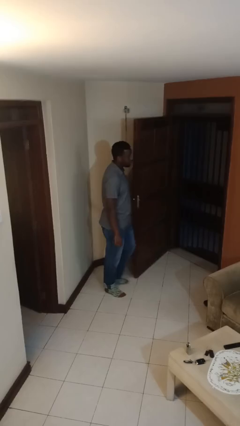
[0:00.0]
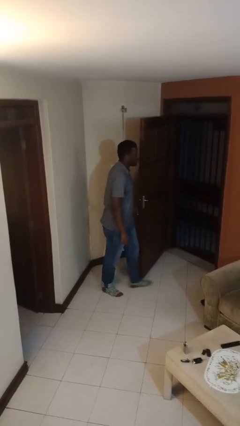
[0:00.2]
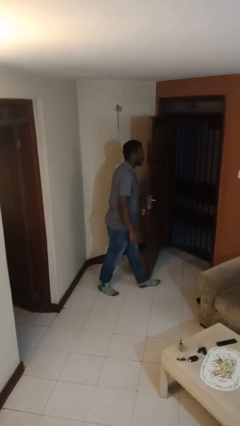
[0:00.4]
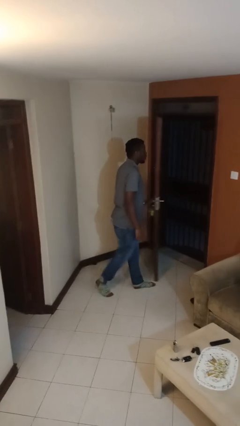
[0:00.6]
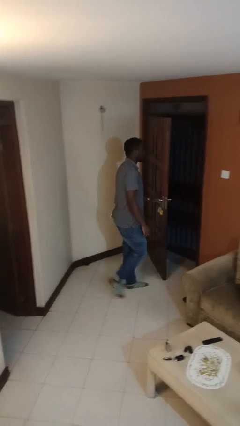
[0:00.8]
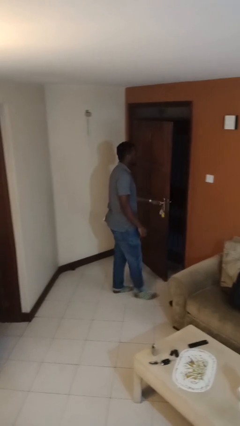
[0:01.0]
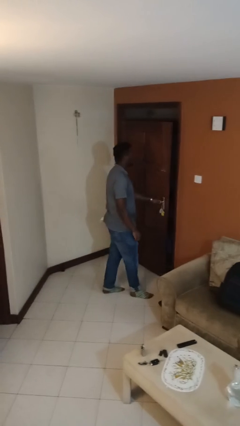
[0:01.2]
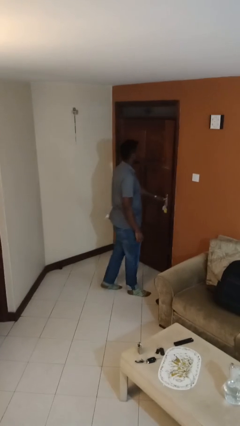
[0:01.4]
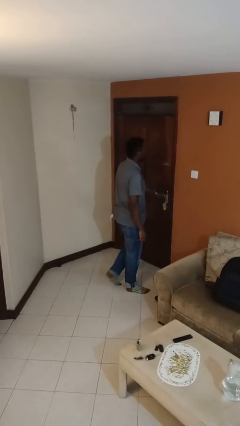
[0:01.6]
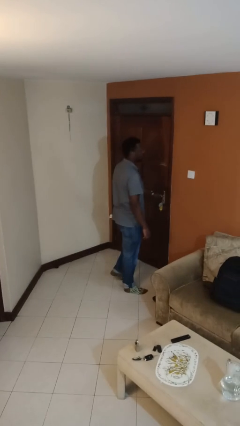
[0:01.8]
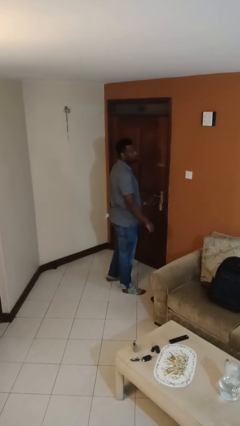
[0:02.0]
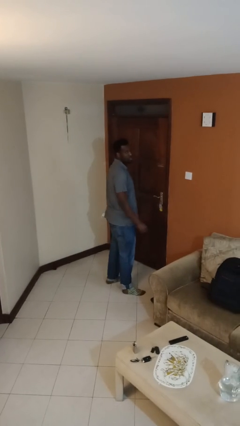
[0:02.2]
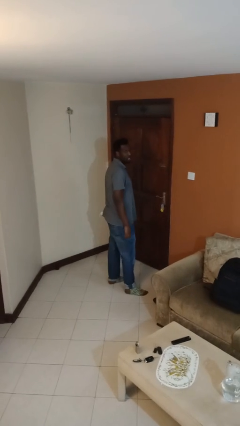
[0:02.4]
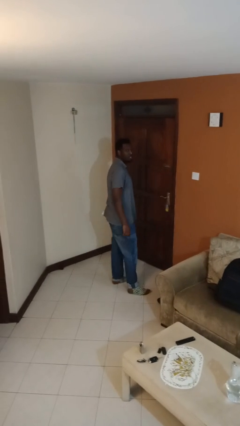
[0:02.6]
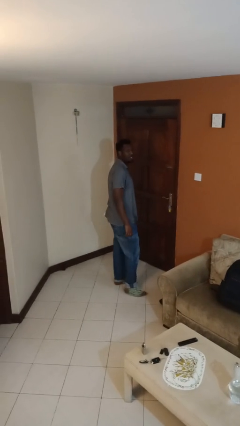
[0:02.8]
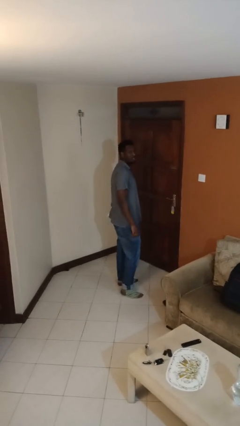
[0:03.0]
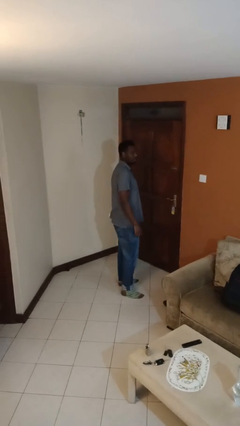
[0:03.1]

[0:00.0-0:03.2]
person closes facility door

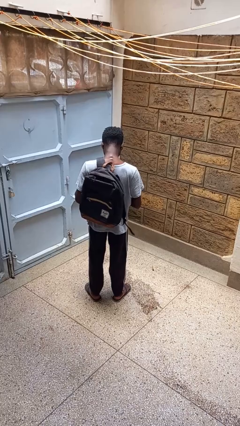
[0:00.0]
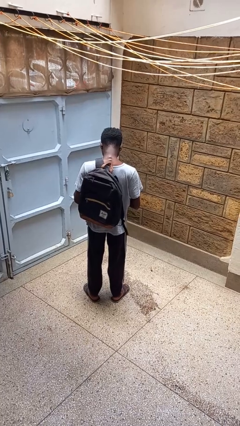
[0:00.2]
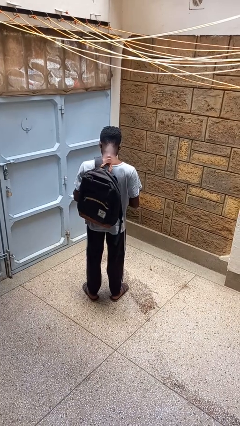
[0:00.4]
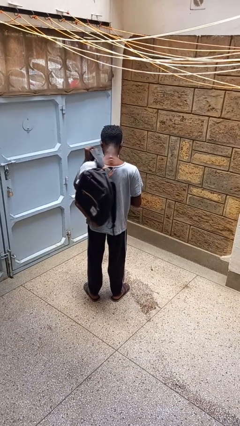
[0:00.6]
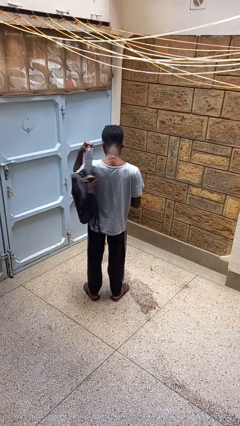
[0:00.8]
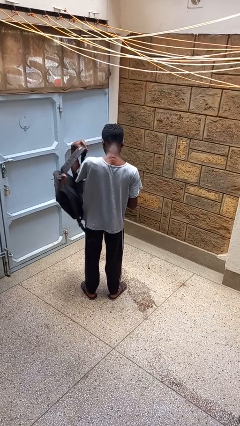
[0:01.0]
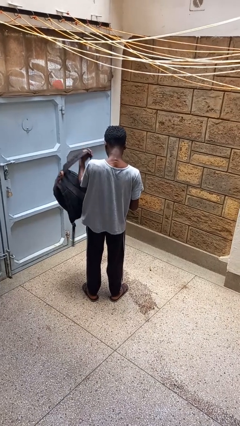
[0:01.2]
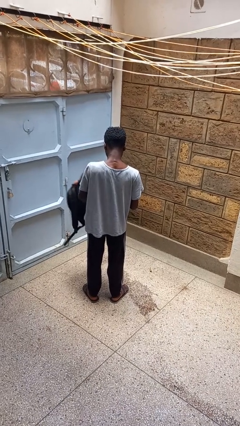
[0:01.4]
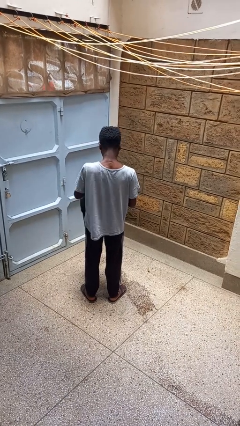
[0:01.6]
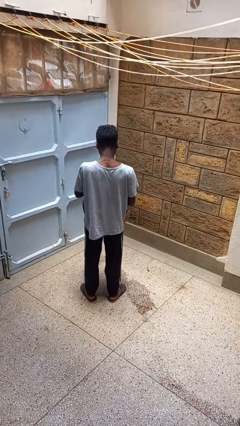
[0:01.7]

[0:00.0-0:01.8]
person takes off backpack

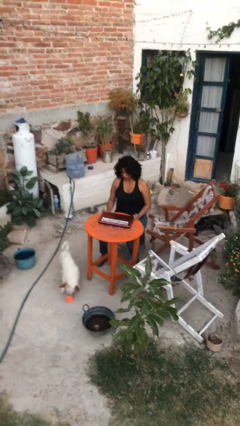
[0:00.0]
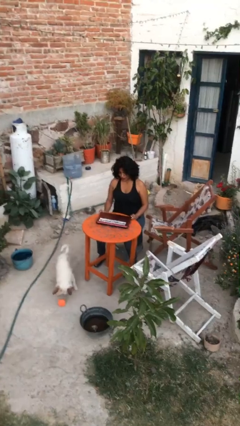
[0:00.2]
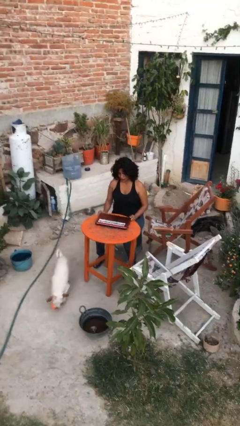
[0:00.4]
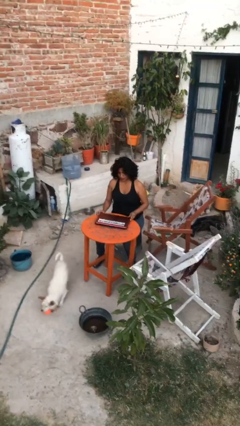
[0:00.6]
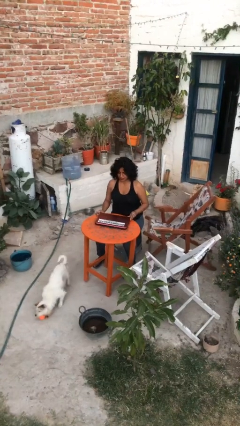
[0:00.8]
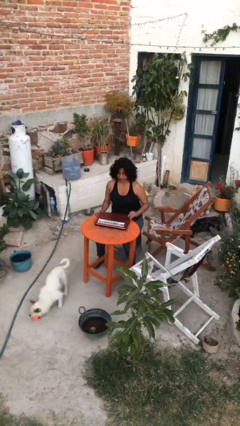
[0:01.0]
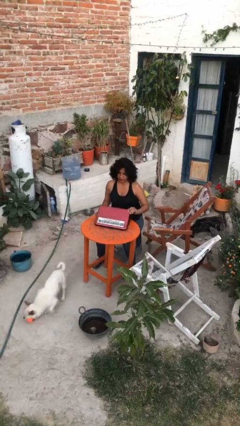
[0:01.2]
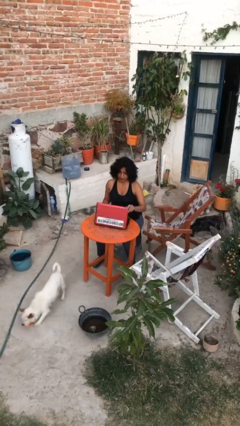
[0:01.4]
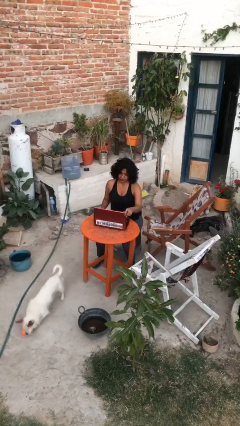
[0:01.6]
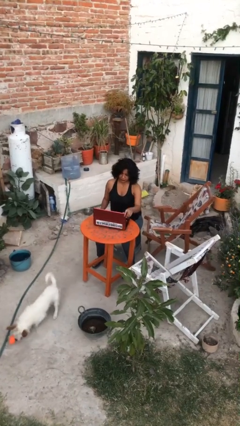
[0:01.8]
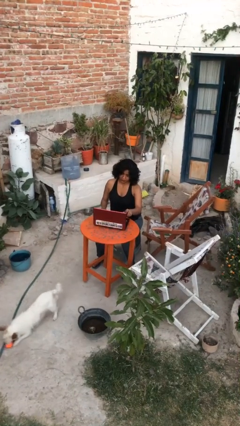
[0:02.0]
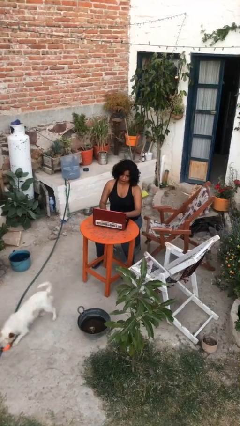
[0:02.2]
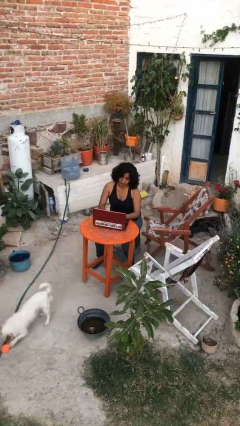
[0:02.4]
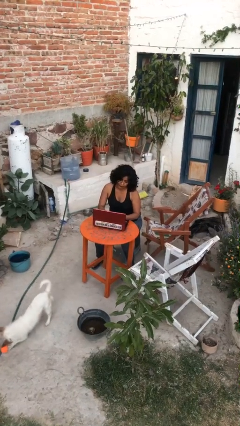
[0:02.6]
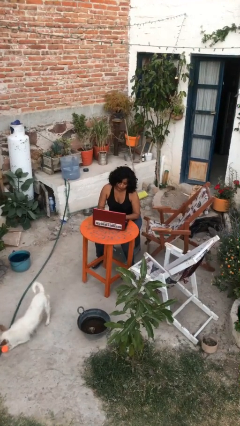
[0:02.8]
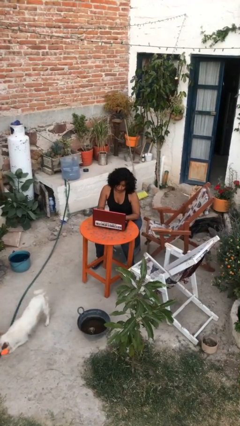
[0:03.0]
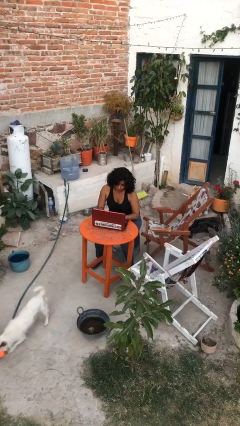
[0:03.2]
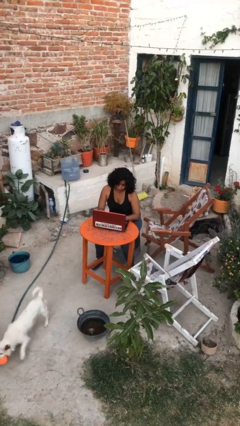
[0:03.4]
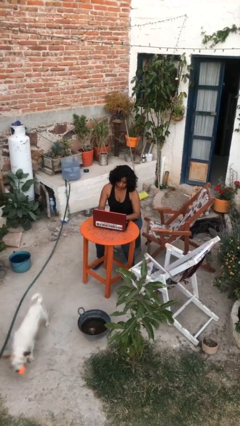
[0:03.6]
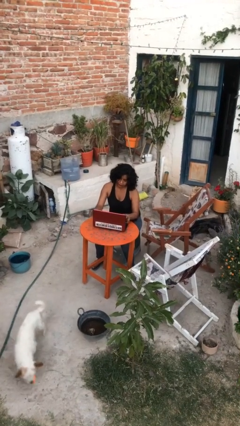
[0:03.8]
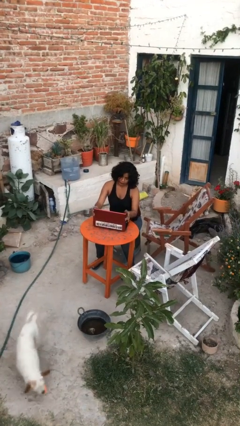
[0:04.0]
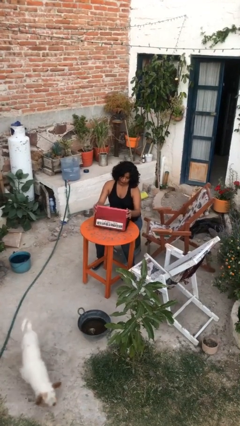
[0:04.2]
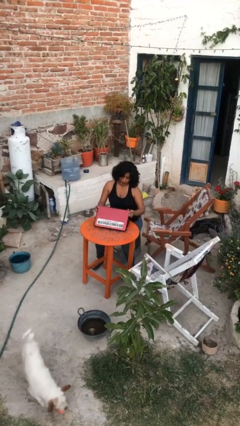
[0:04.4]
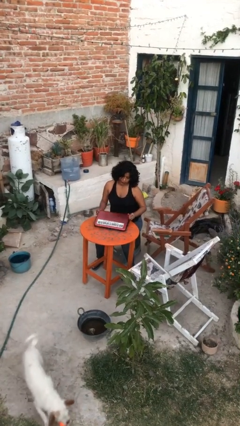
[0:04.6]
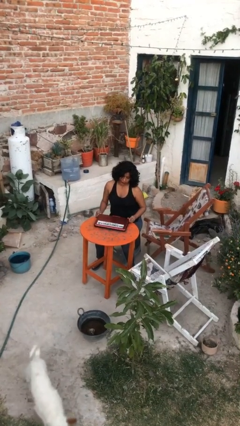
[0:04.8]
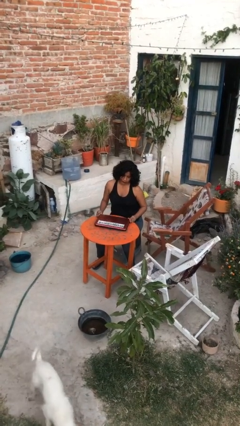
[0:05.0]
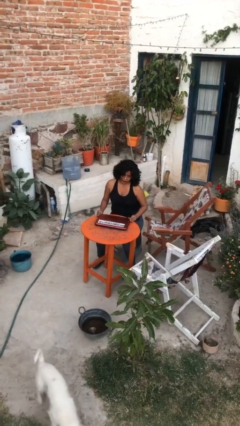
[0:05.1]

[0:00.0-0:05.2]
person interacts with laptop

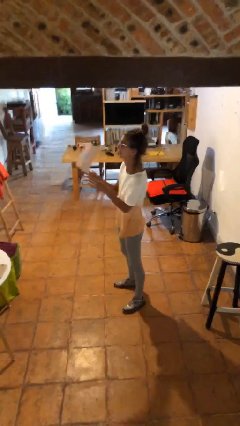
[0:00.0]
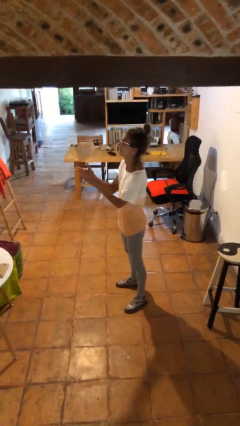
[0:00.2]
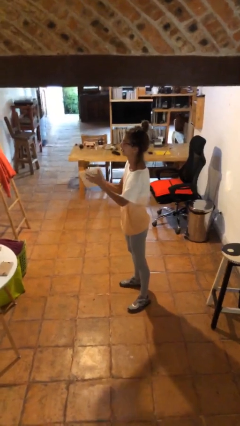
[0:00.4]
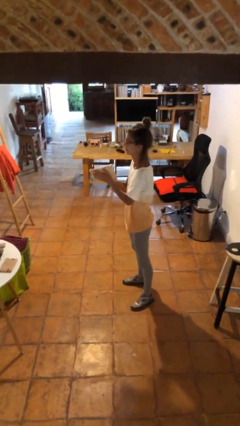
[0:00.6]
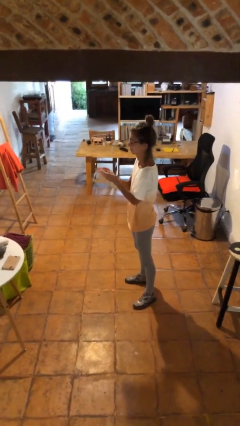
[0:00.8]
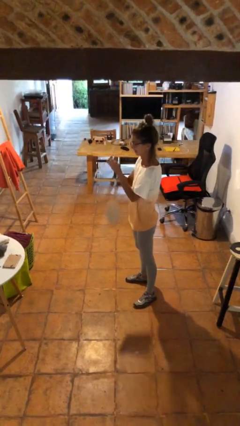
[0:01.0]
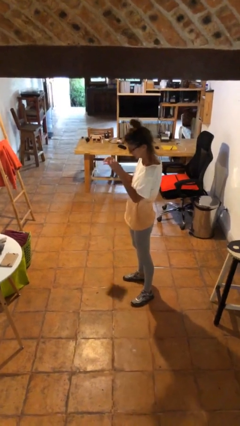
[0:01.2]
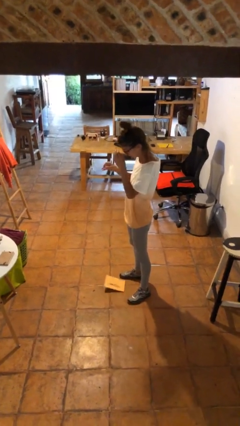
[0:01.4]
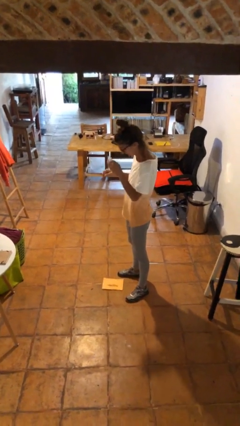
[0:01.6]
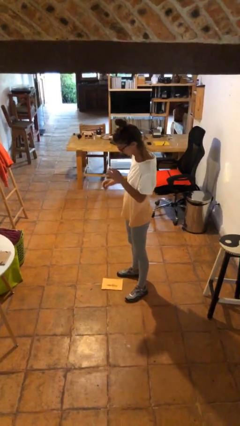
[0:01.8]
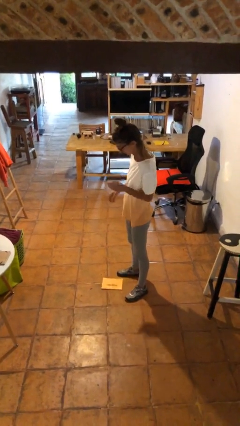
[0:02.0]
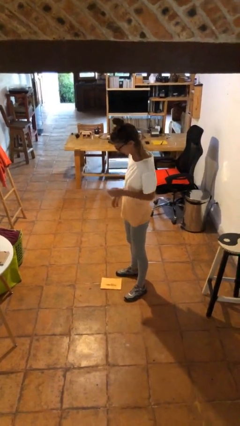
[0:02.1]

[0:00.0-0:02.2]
person drops object

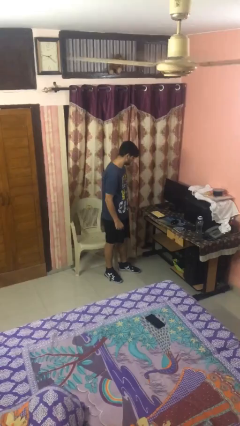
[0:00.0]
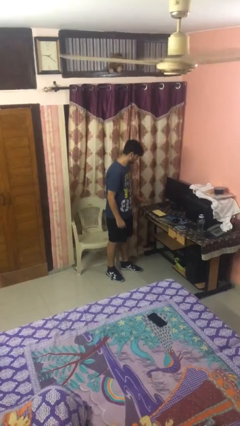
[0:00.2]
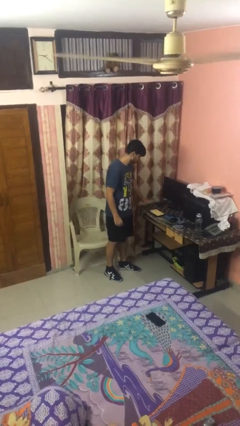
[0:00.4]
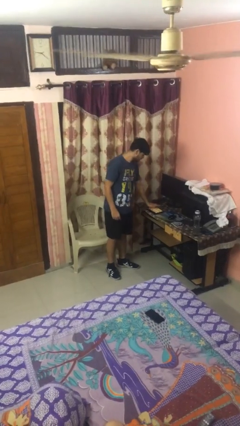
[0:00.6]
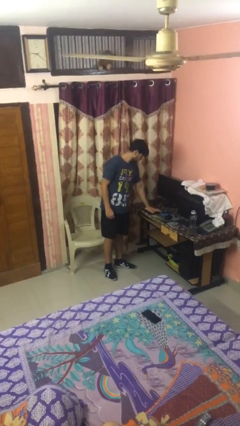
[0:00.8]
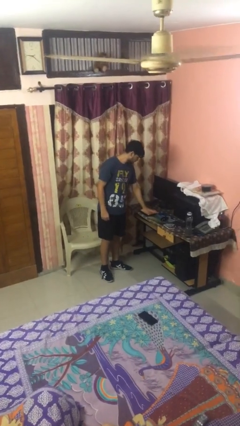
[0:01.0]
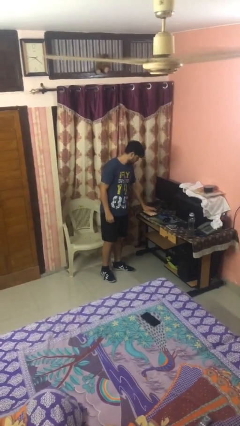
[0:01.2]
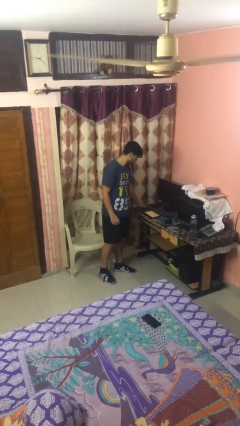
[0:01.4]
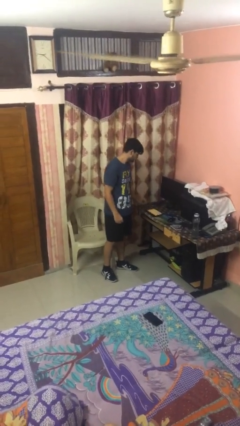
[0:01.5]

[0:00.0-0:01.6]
person waves hand over object

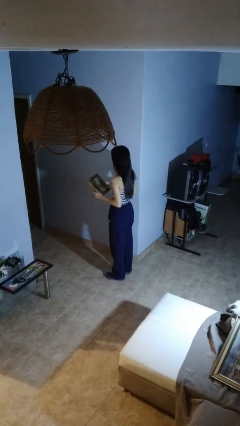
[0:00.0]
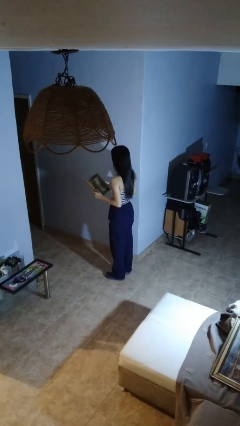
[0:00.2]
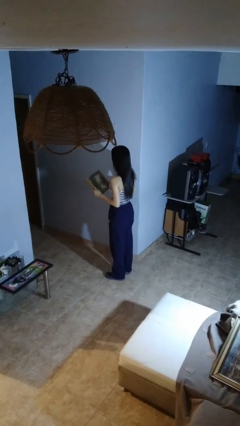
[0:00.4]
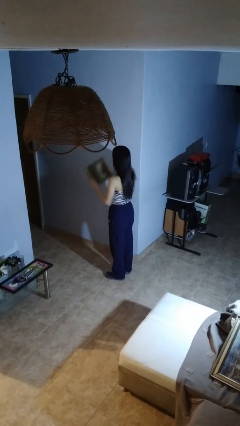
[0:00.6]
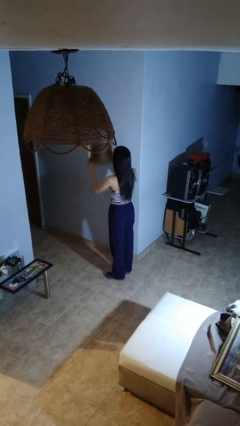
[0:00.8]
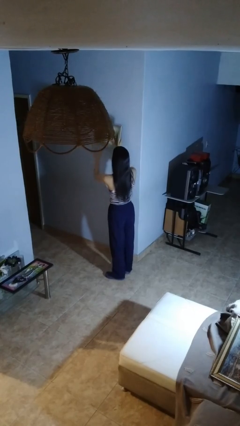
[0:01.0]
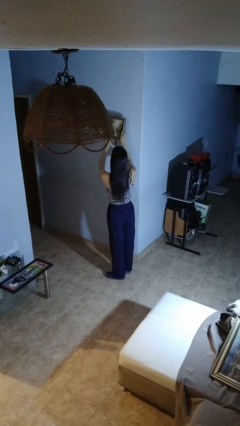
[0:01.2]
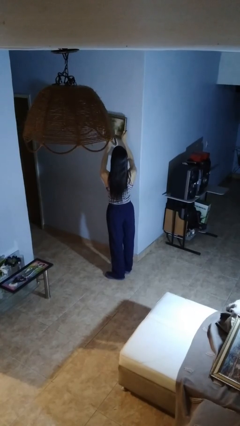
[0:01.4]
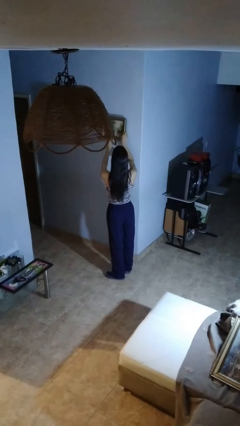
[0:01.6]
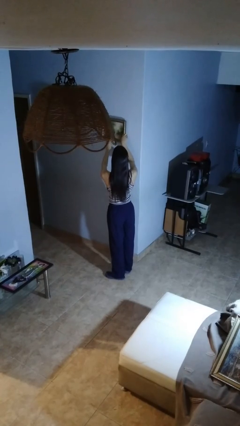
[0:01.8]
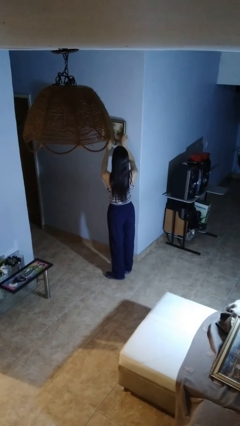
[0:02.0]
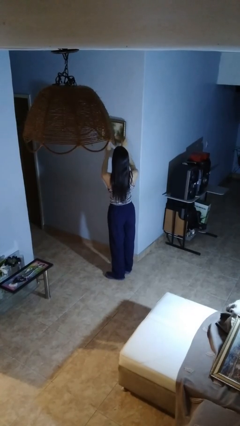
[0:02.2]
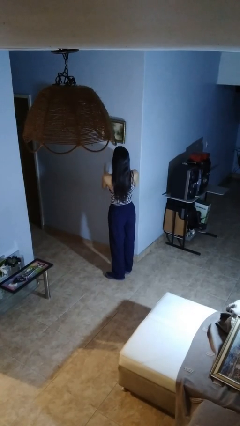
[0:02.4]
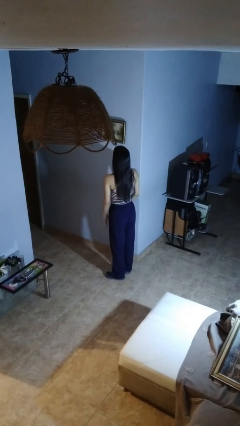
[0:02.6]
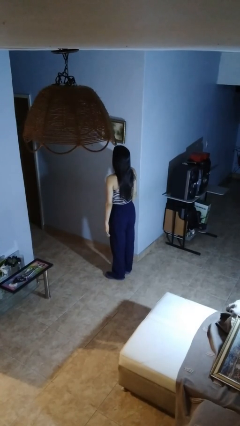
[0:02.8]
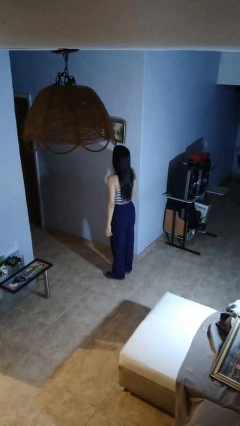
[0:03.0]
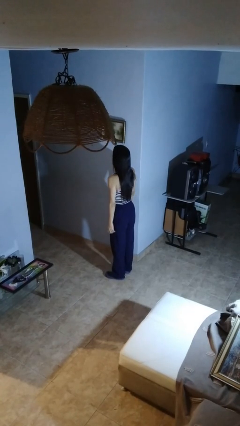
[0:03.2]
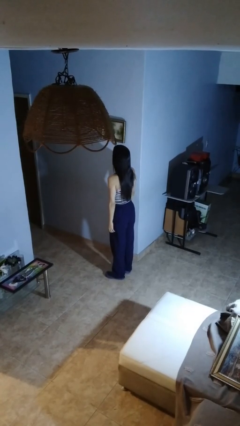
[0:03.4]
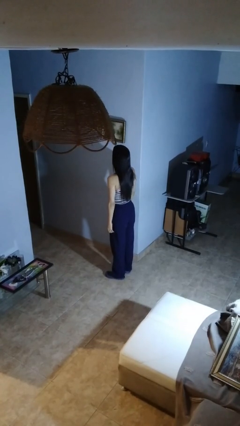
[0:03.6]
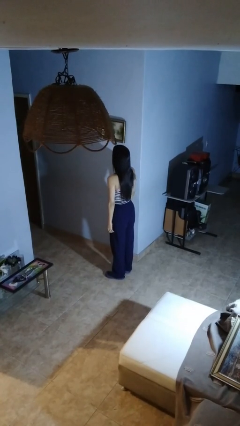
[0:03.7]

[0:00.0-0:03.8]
person puts up picture frame
